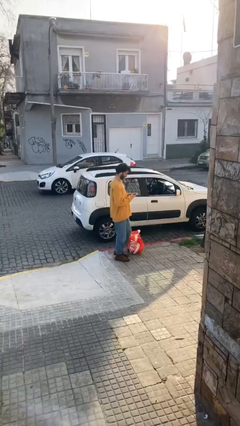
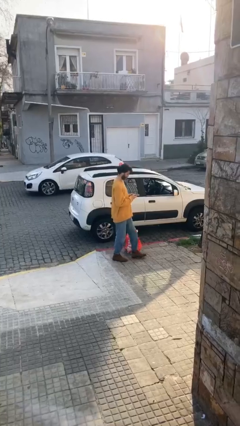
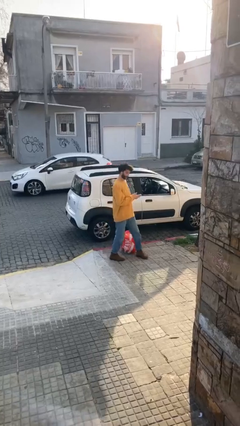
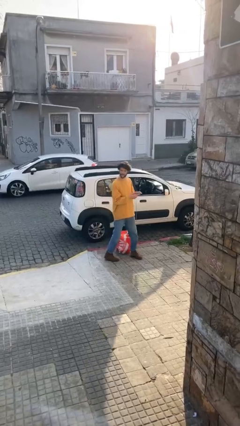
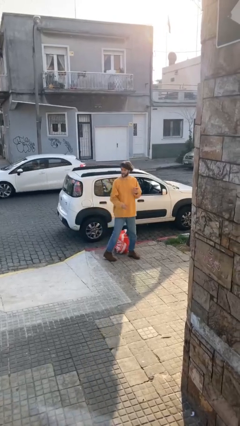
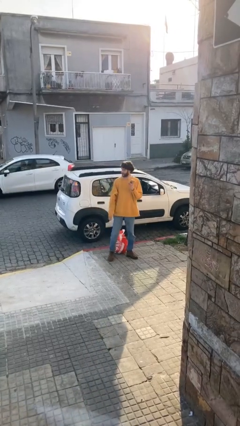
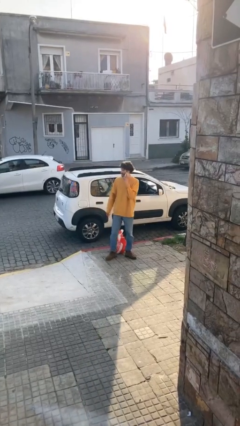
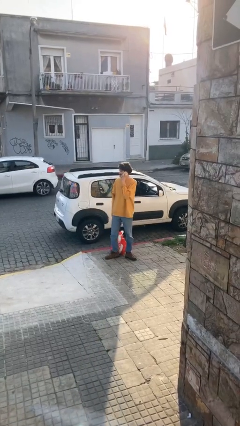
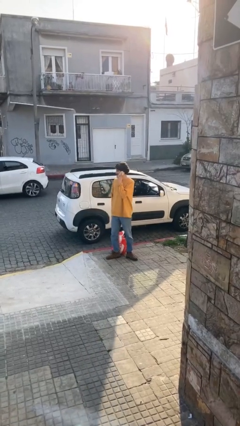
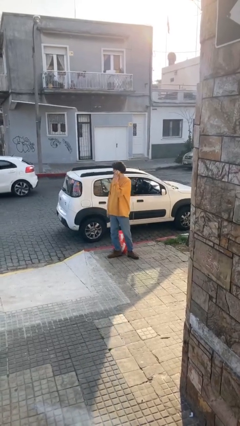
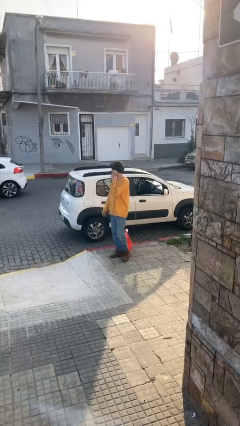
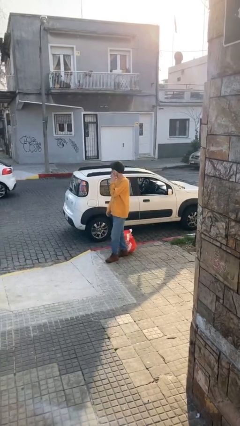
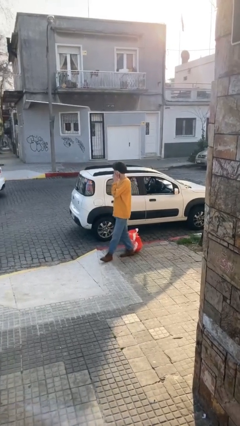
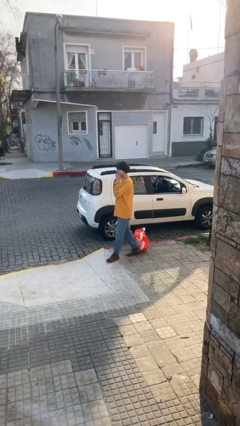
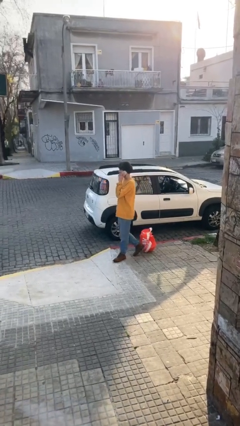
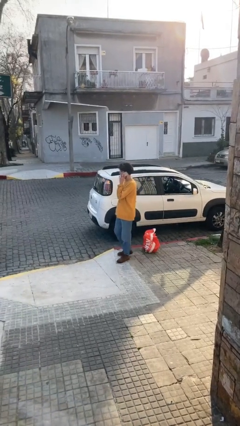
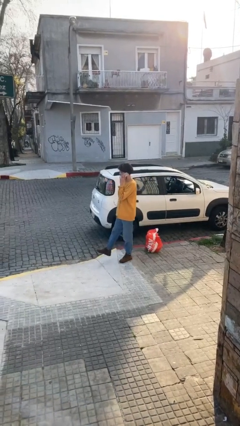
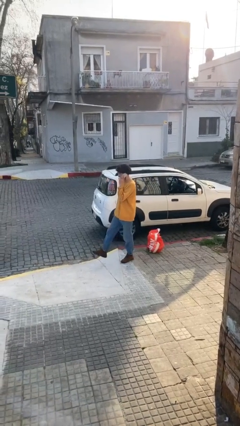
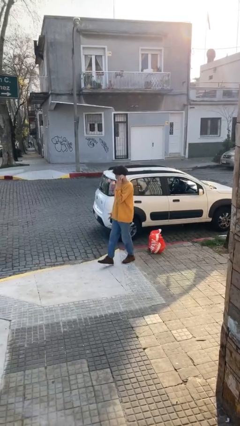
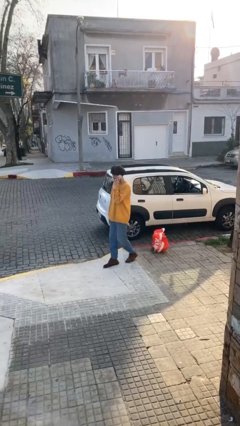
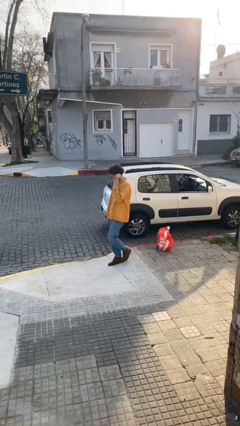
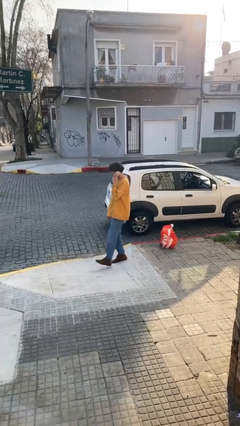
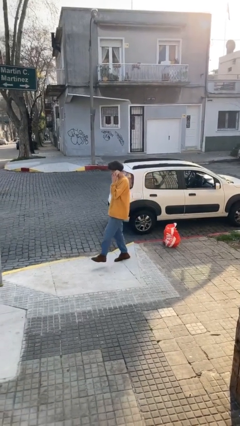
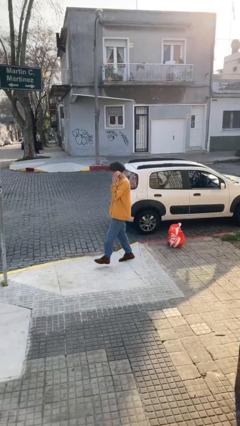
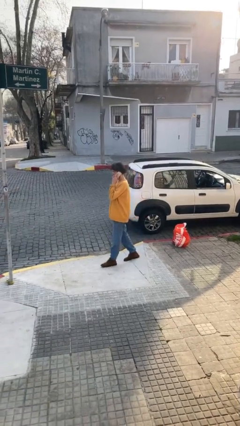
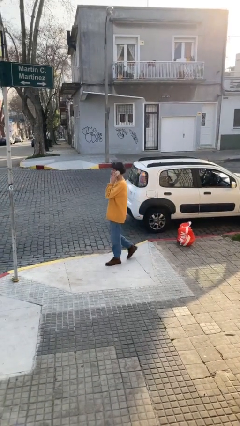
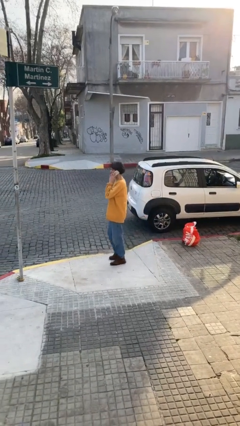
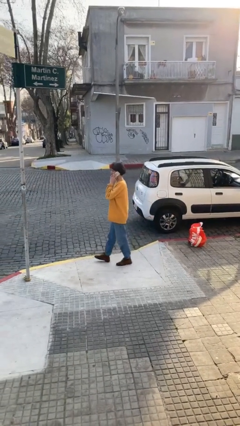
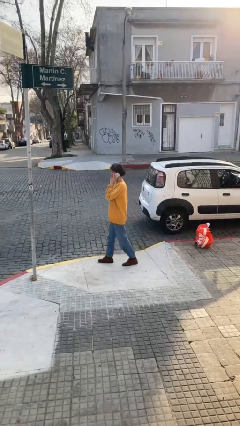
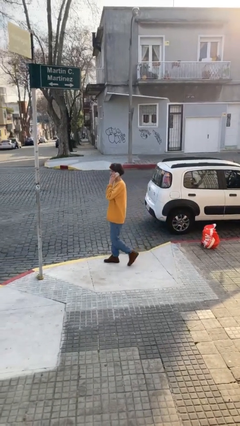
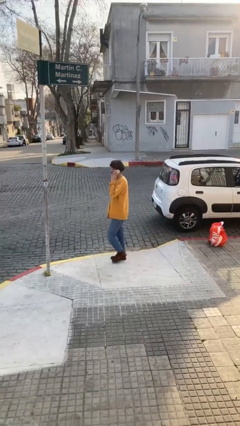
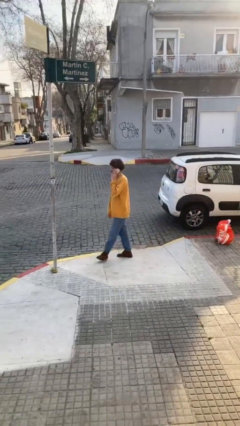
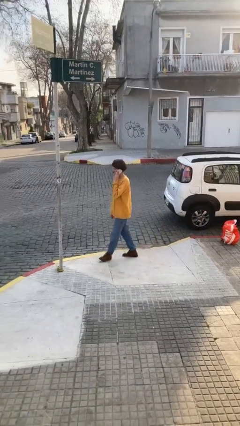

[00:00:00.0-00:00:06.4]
person talks on phone

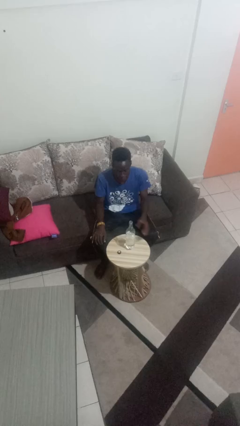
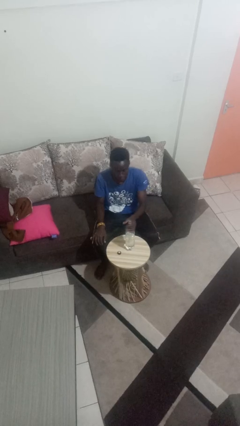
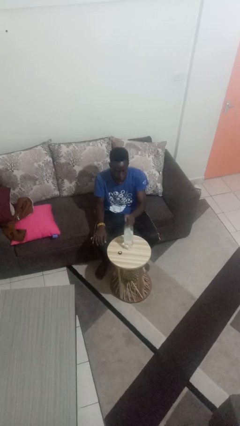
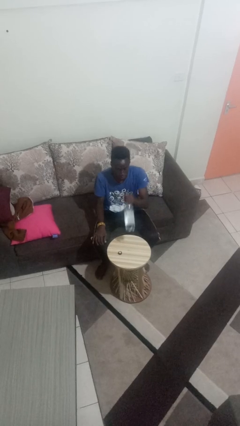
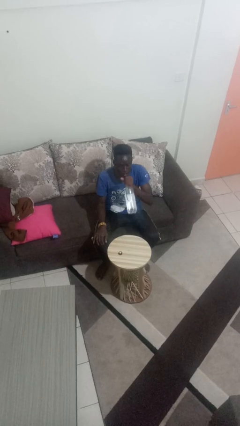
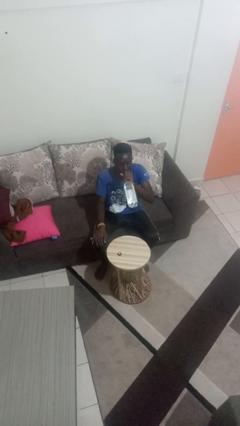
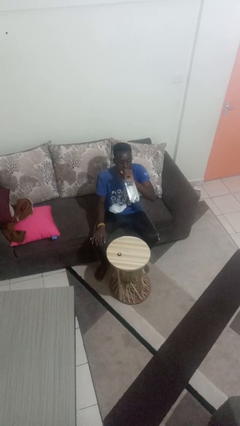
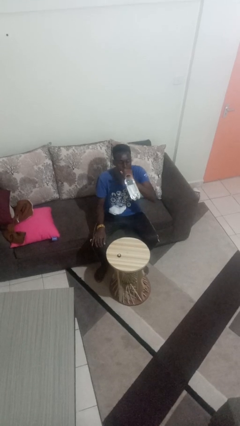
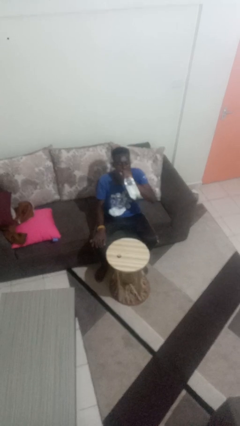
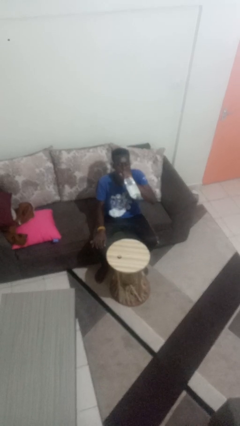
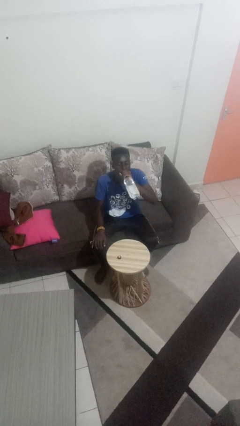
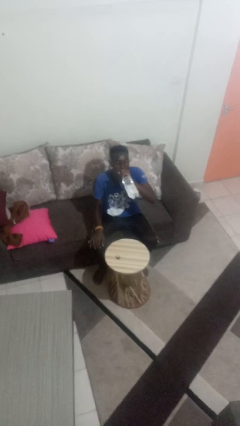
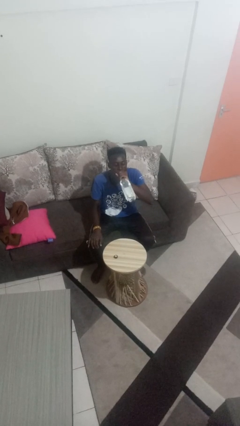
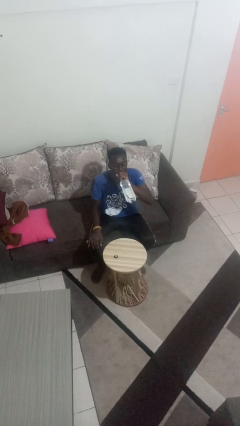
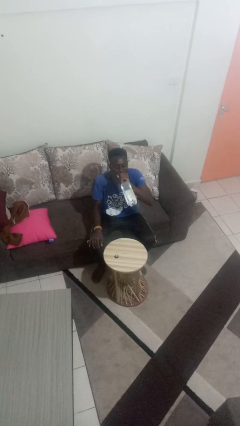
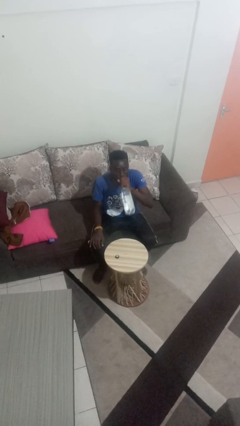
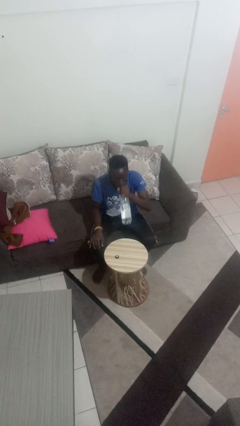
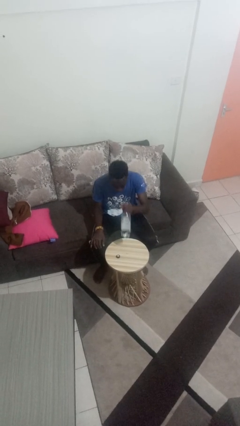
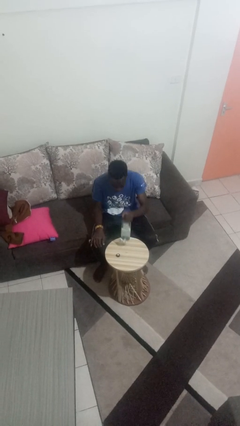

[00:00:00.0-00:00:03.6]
person drinks from bottle

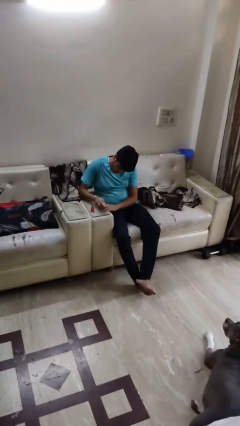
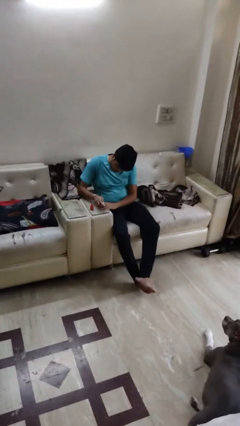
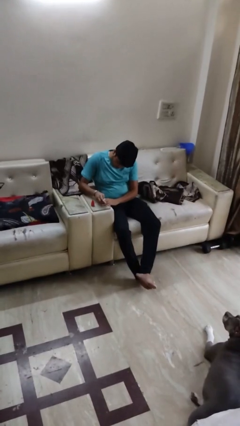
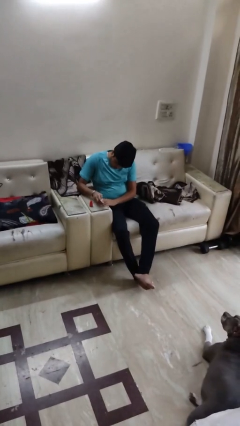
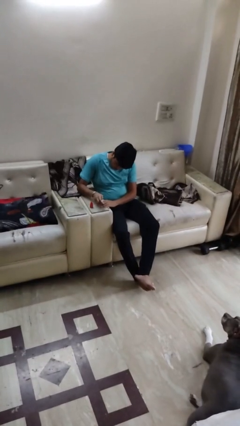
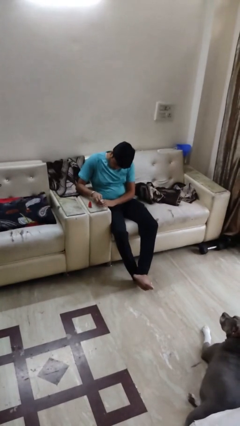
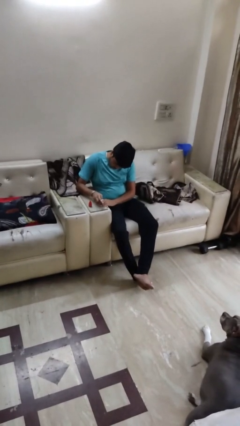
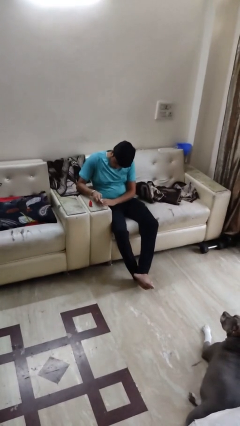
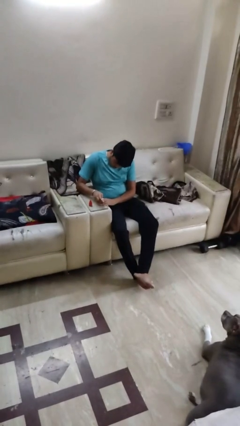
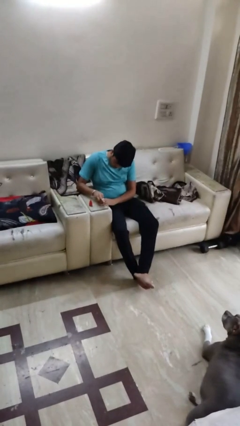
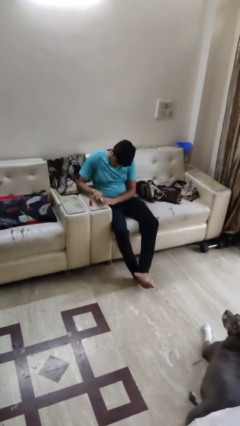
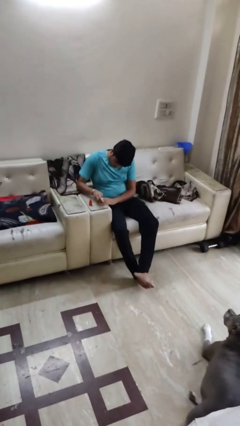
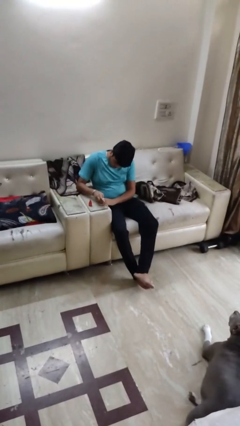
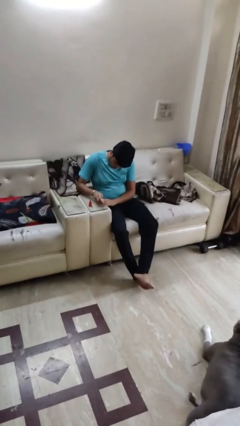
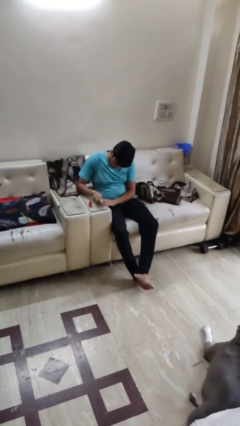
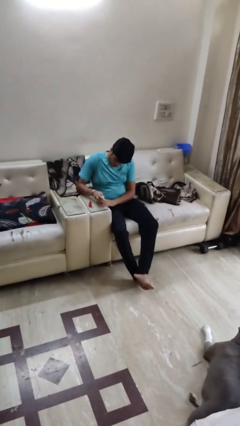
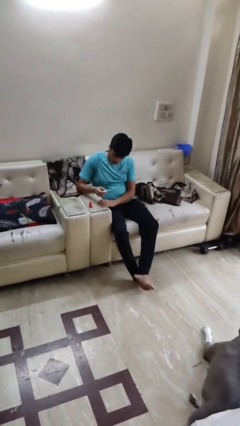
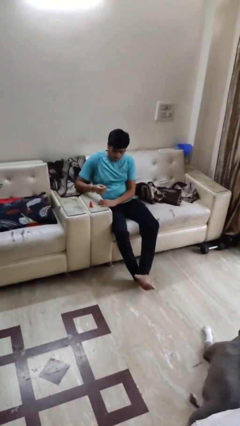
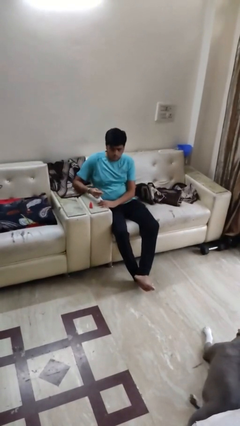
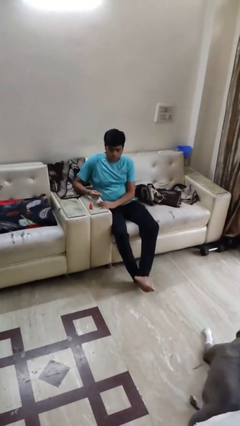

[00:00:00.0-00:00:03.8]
person paints fingernails

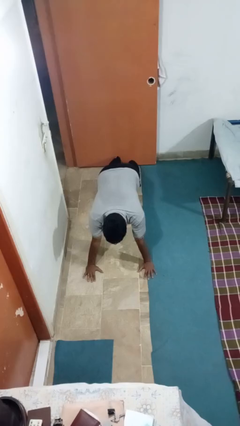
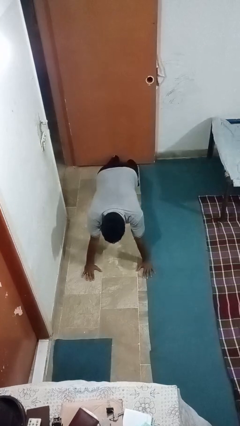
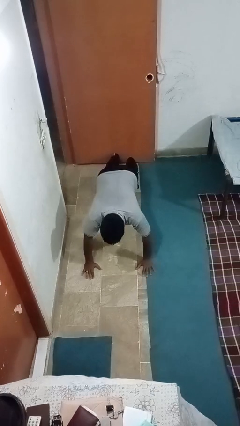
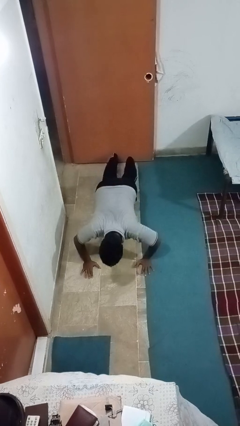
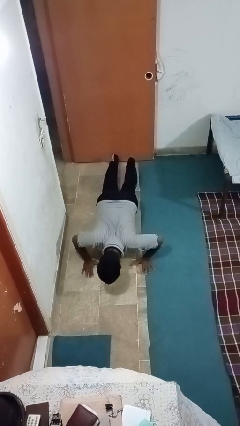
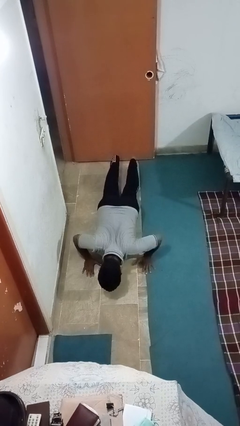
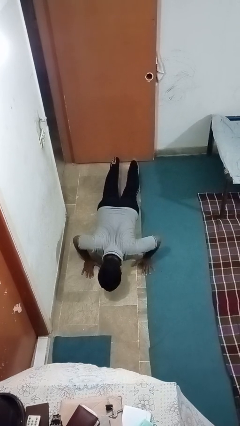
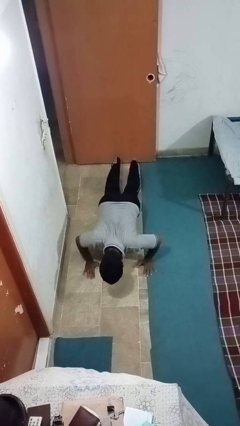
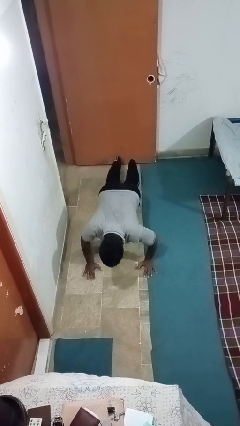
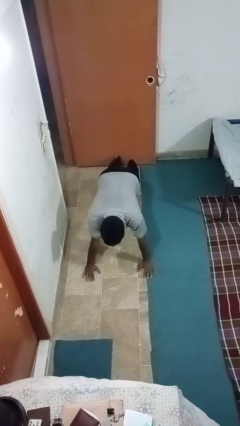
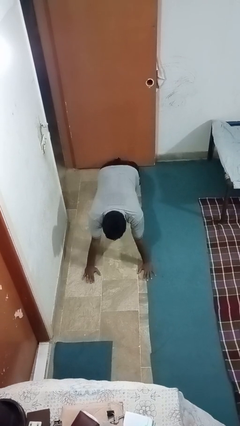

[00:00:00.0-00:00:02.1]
person exercises with pushup

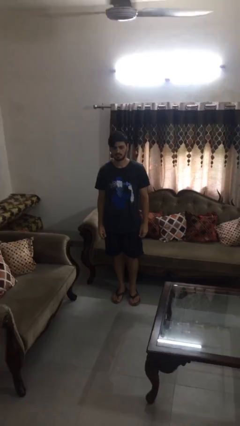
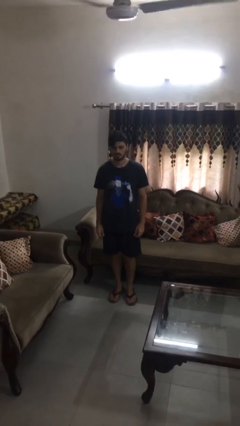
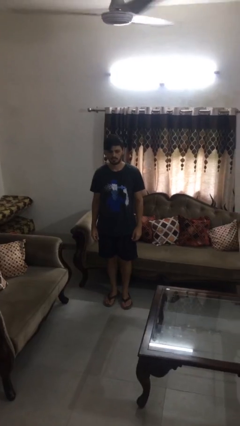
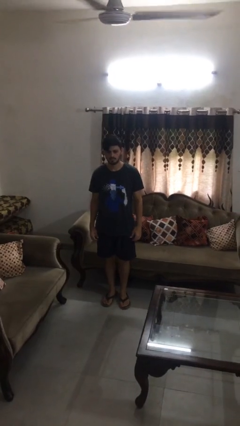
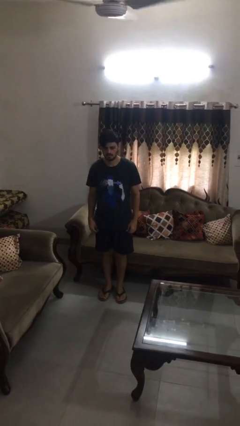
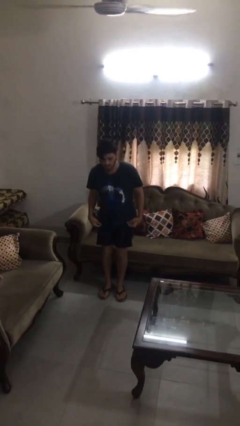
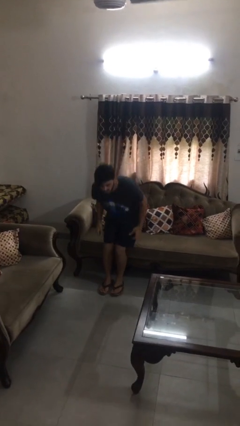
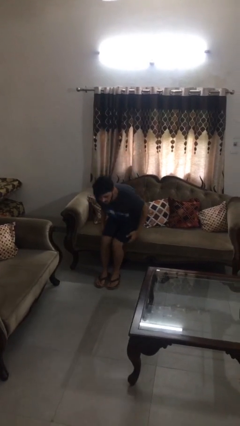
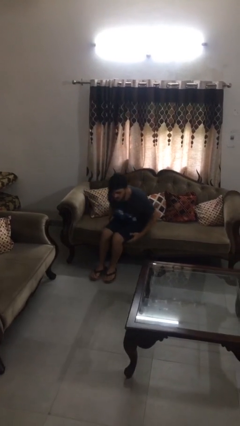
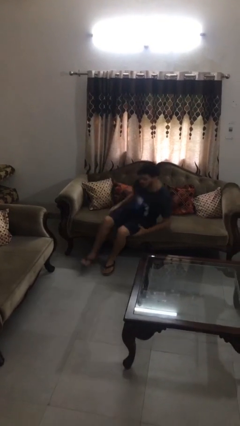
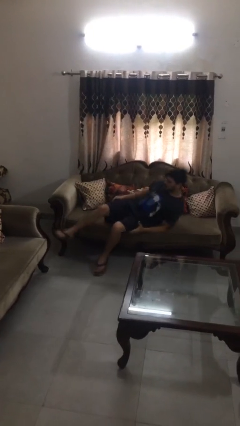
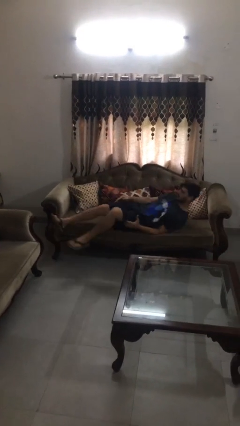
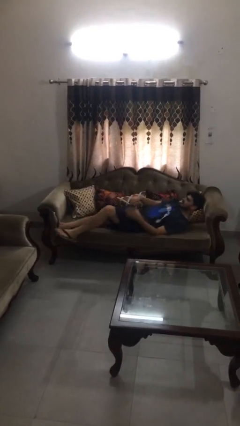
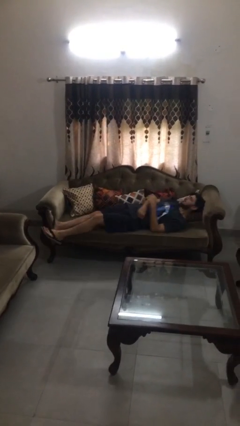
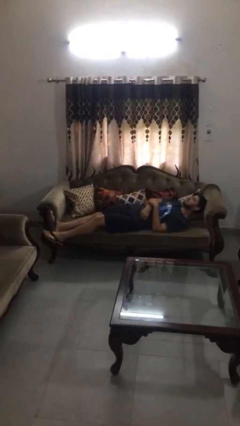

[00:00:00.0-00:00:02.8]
person lies down on couch
